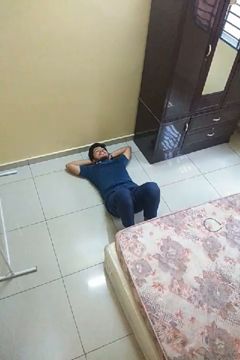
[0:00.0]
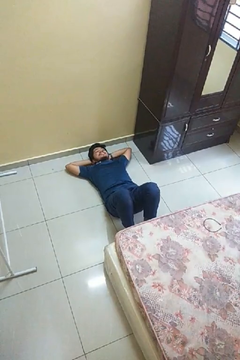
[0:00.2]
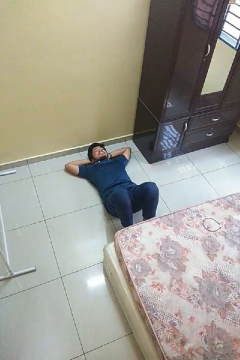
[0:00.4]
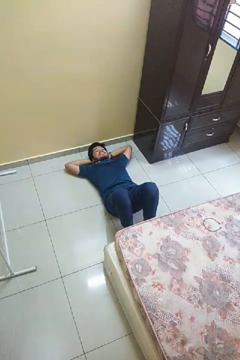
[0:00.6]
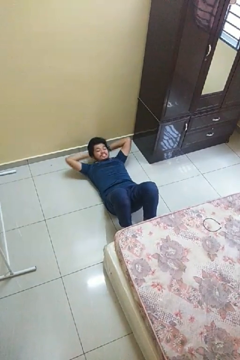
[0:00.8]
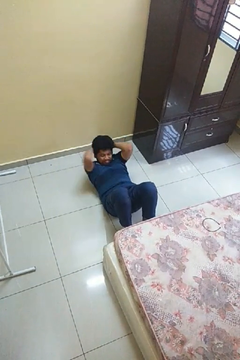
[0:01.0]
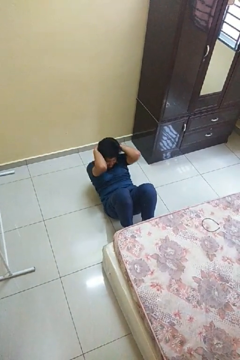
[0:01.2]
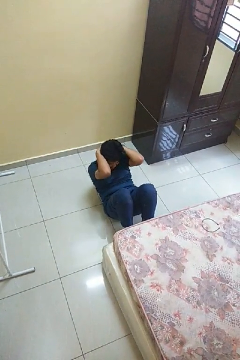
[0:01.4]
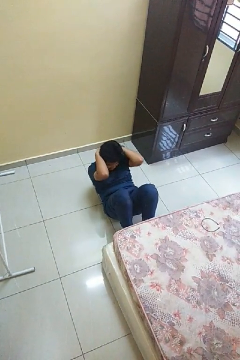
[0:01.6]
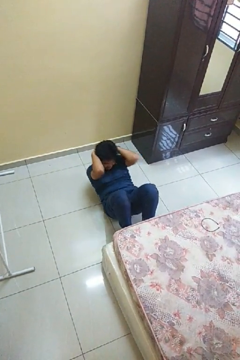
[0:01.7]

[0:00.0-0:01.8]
person exercises with situp

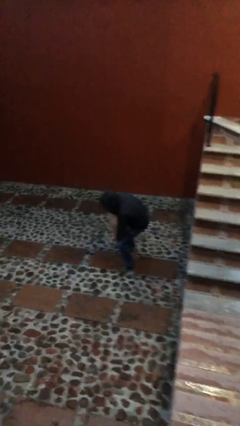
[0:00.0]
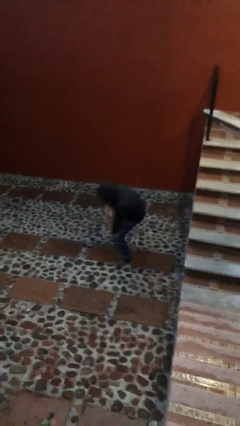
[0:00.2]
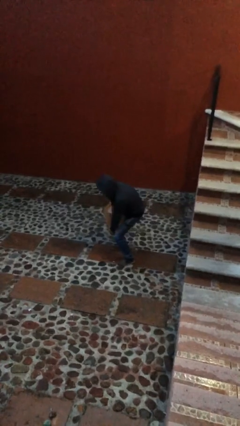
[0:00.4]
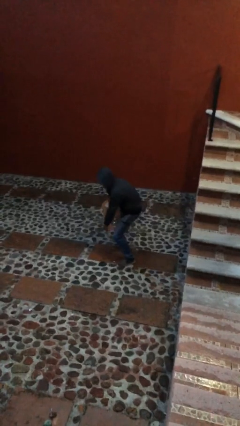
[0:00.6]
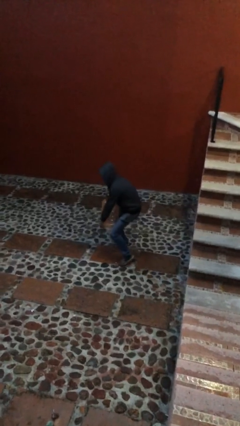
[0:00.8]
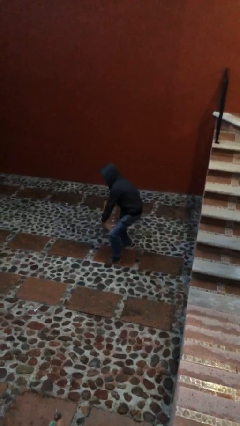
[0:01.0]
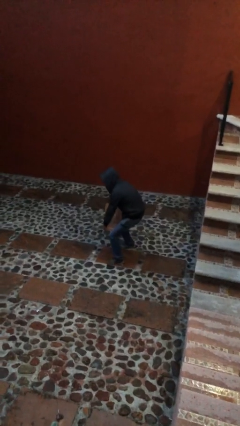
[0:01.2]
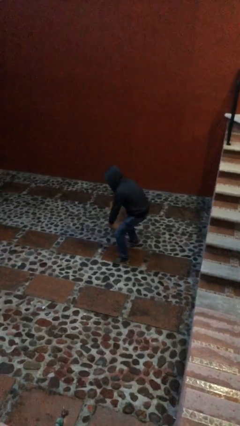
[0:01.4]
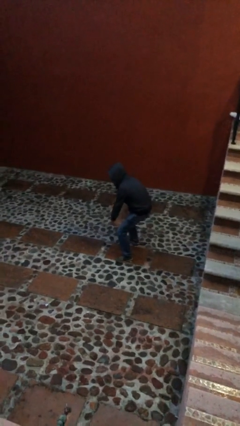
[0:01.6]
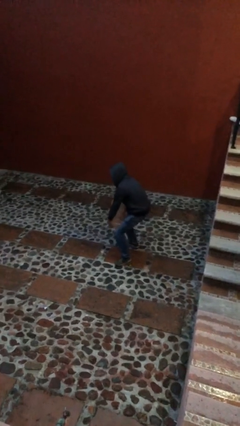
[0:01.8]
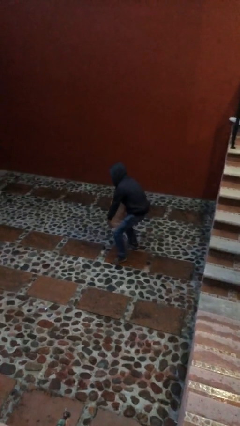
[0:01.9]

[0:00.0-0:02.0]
person carries heavy object

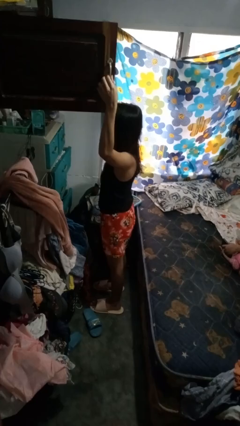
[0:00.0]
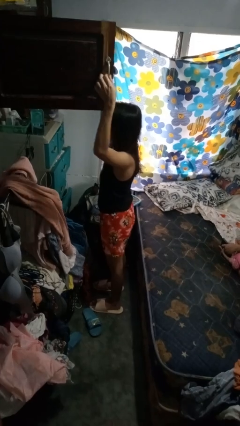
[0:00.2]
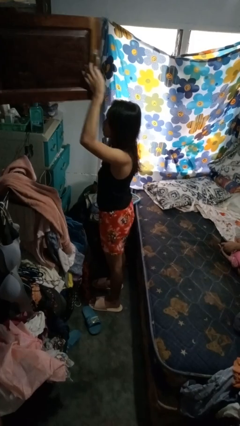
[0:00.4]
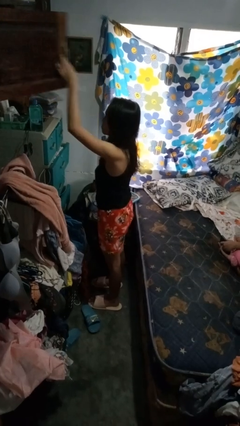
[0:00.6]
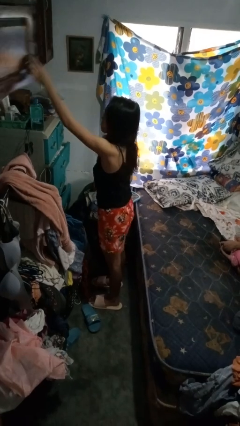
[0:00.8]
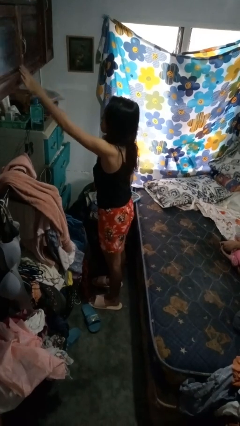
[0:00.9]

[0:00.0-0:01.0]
person closes closet door

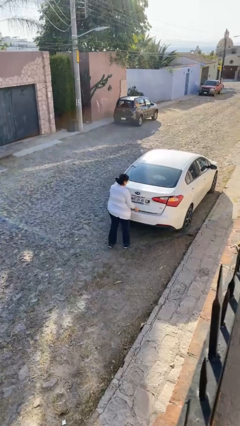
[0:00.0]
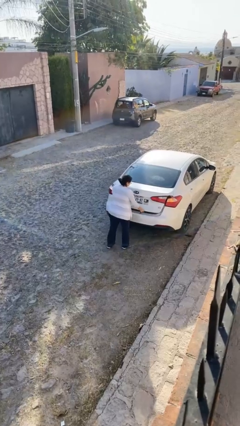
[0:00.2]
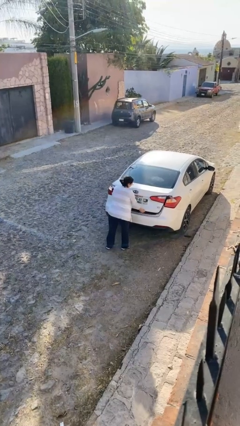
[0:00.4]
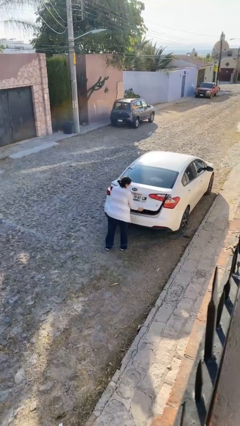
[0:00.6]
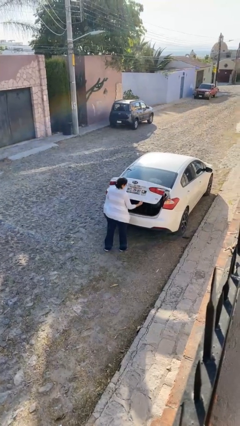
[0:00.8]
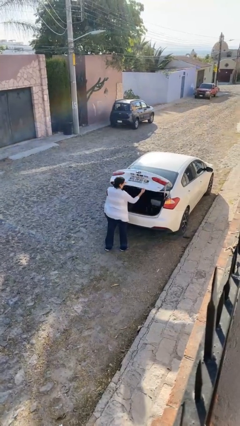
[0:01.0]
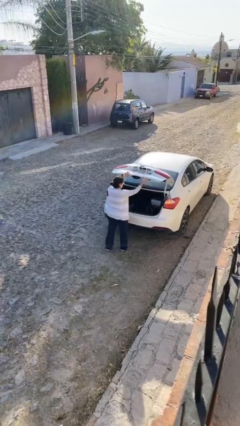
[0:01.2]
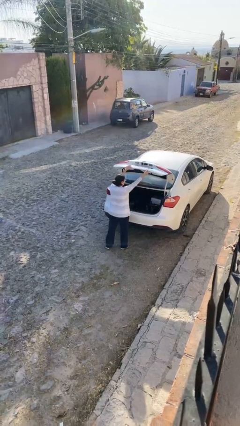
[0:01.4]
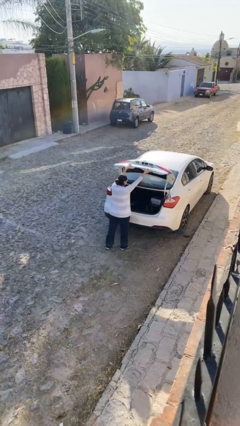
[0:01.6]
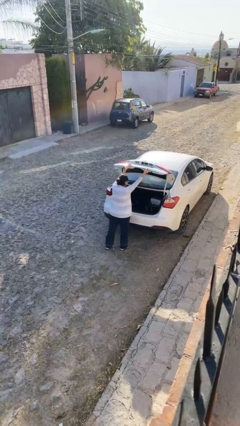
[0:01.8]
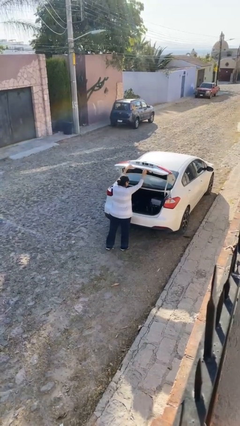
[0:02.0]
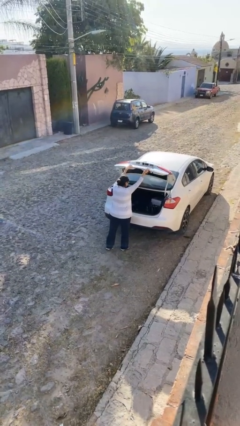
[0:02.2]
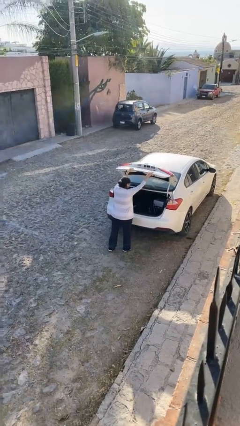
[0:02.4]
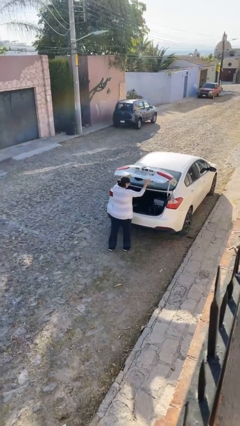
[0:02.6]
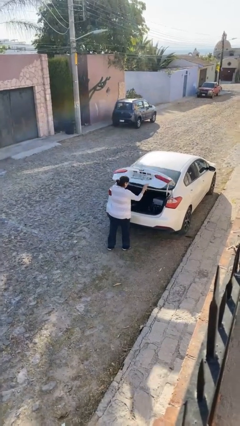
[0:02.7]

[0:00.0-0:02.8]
person opens car trunk

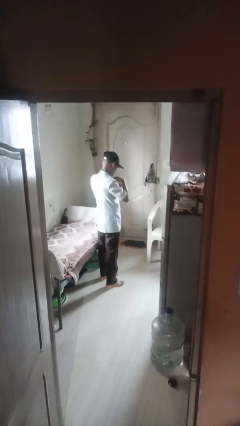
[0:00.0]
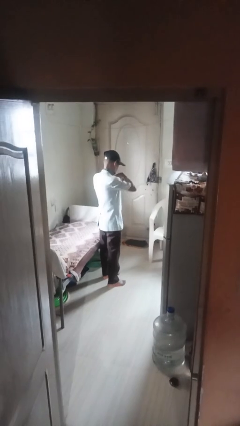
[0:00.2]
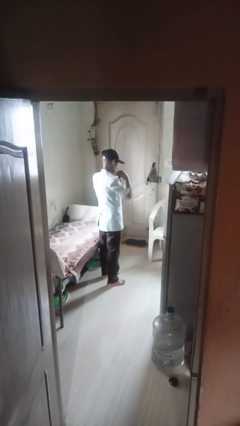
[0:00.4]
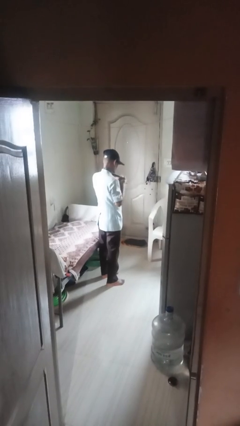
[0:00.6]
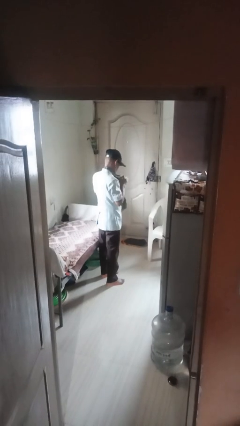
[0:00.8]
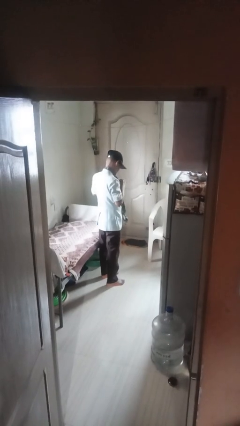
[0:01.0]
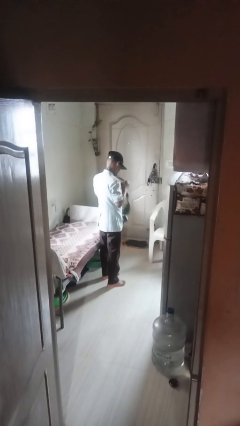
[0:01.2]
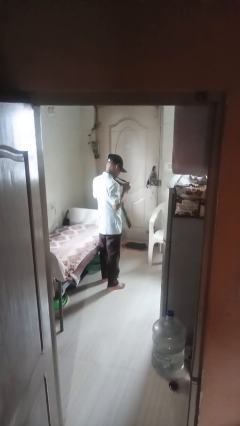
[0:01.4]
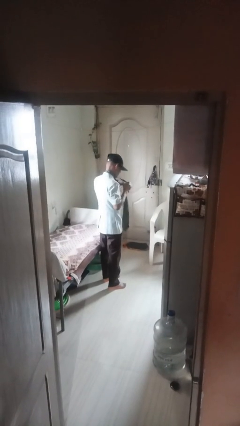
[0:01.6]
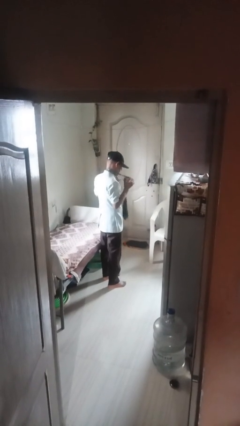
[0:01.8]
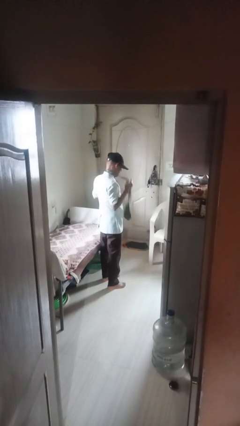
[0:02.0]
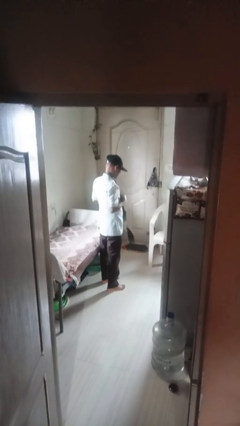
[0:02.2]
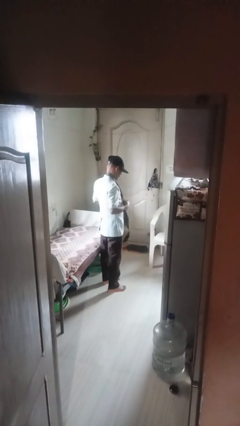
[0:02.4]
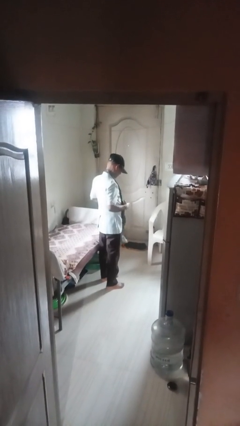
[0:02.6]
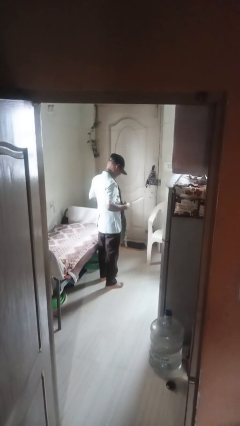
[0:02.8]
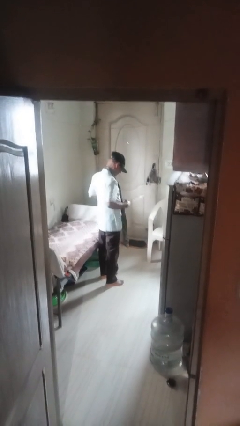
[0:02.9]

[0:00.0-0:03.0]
person takes off necktie

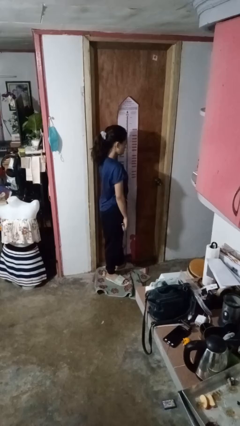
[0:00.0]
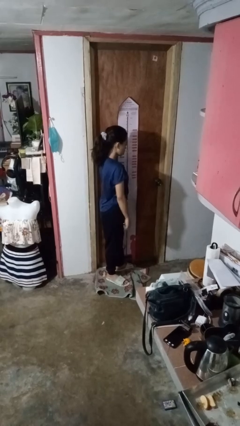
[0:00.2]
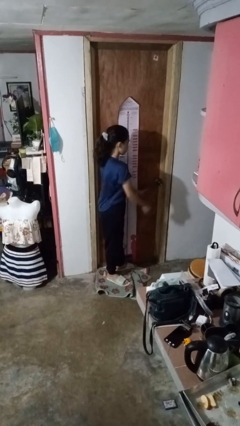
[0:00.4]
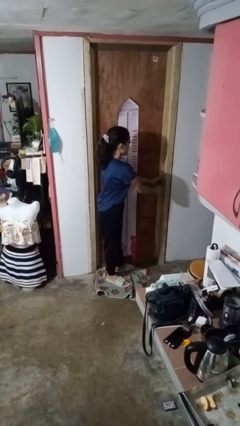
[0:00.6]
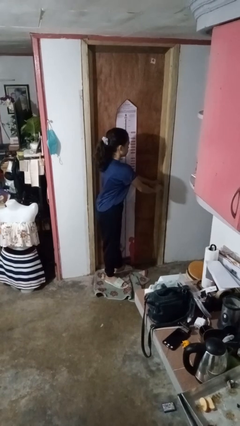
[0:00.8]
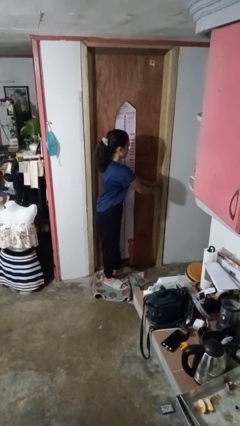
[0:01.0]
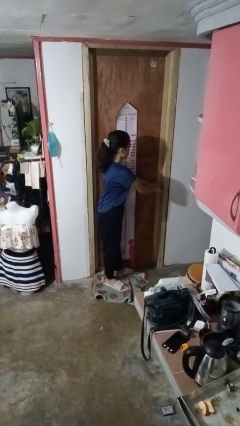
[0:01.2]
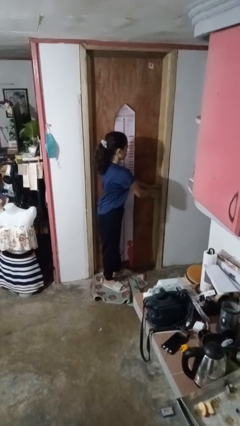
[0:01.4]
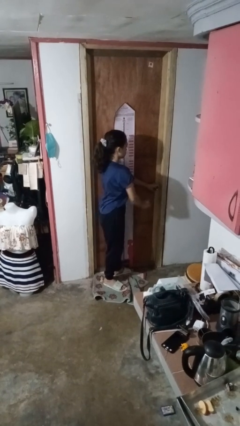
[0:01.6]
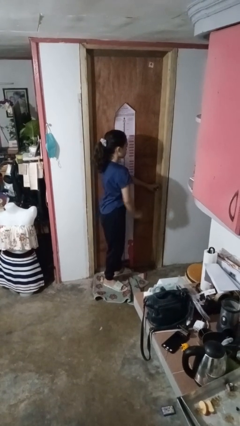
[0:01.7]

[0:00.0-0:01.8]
person unlocks door with keys

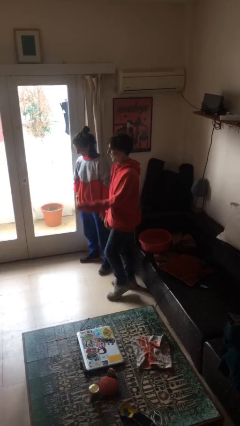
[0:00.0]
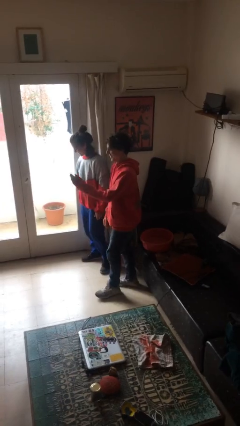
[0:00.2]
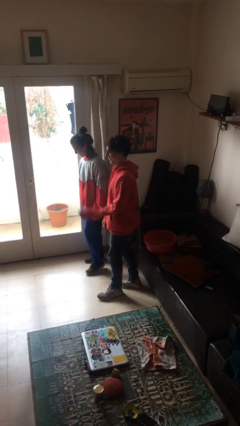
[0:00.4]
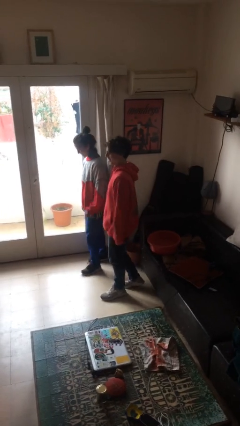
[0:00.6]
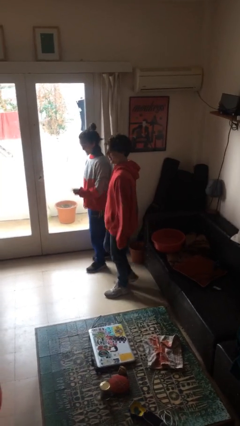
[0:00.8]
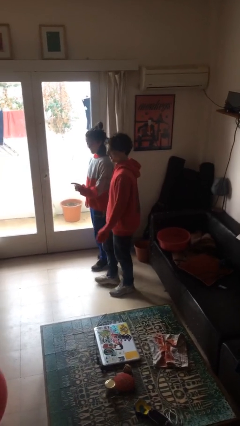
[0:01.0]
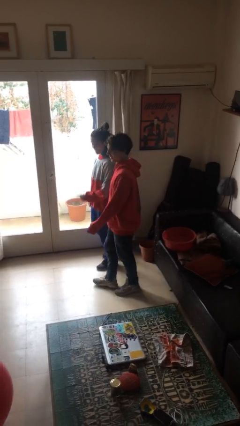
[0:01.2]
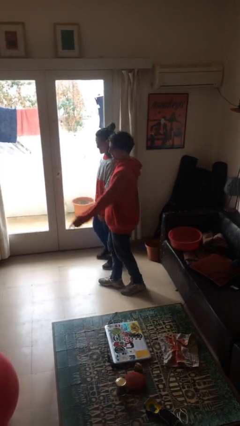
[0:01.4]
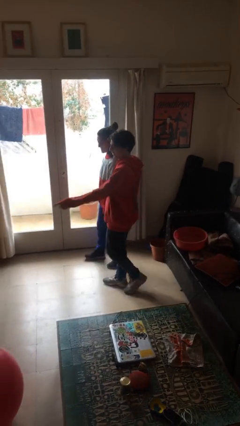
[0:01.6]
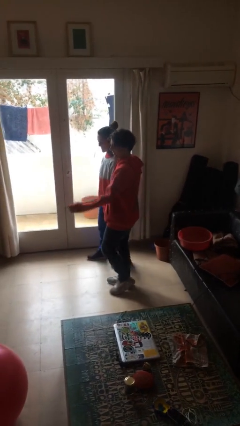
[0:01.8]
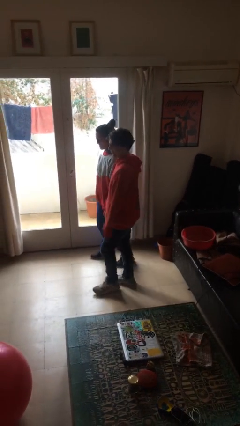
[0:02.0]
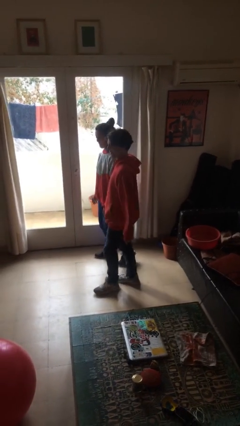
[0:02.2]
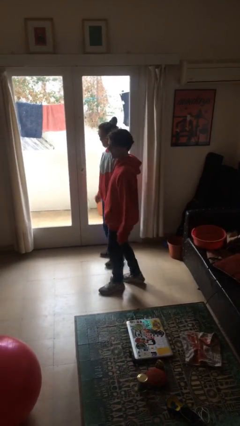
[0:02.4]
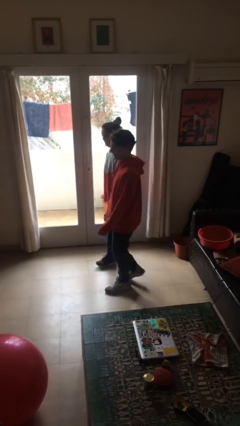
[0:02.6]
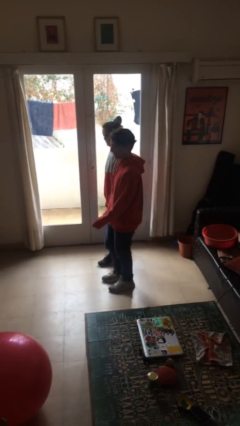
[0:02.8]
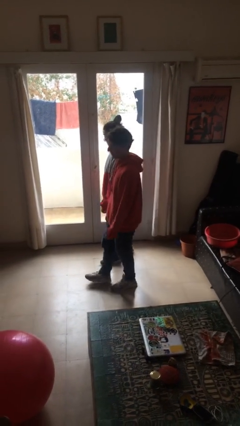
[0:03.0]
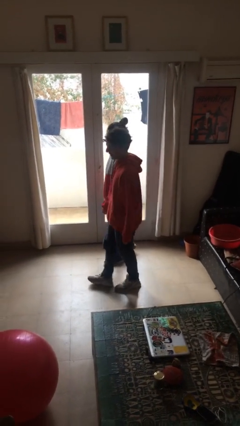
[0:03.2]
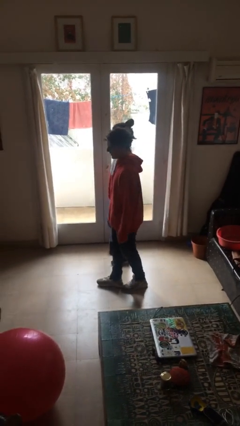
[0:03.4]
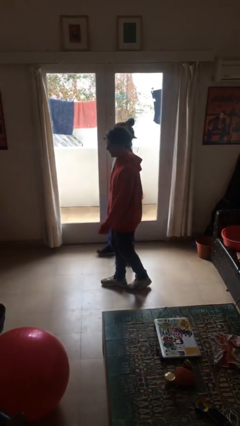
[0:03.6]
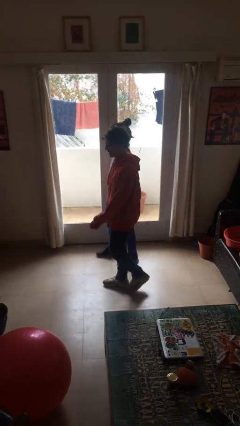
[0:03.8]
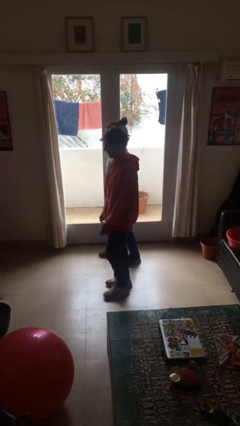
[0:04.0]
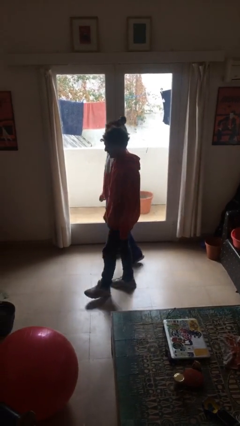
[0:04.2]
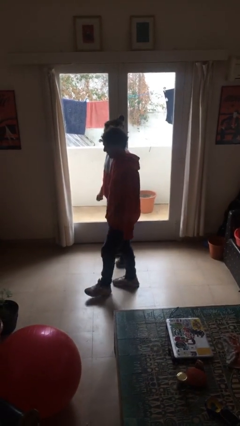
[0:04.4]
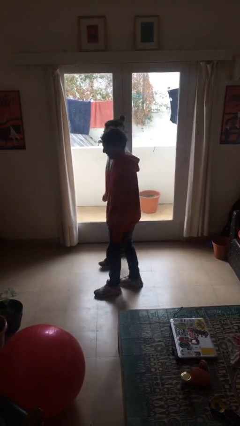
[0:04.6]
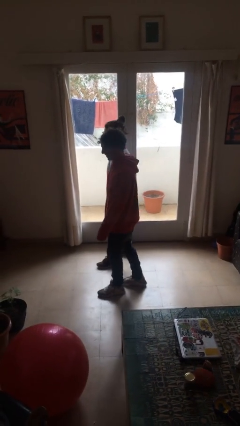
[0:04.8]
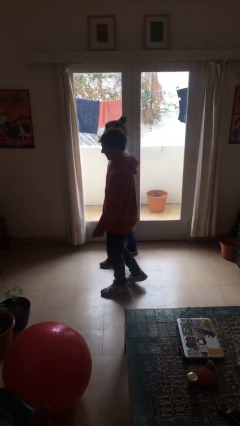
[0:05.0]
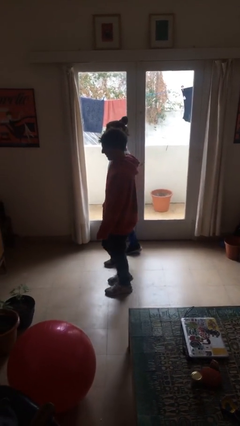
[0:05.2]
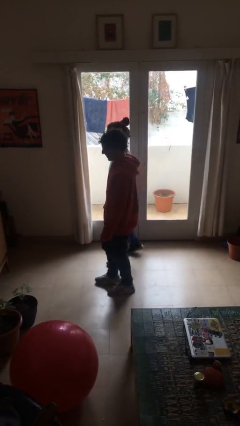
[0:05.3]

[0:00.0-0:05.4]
person talks to person
